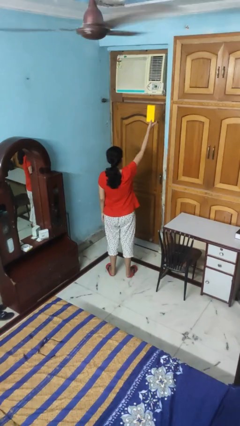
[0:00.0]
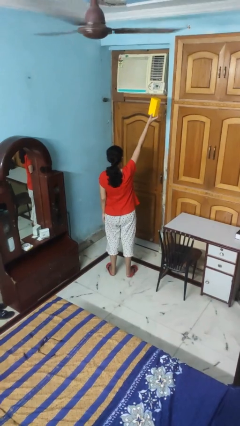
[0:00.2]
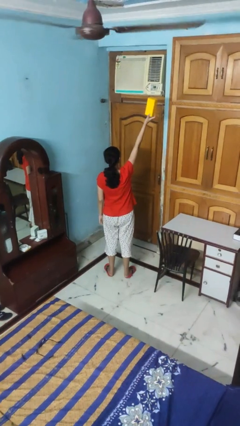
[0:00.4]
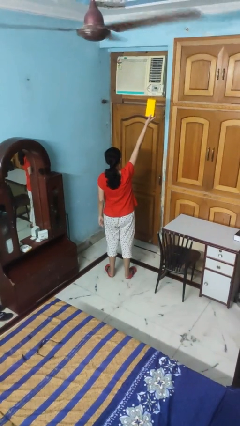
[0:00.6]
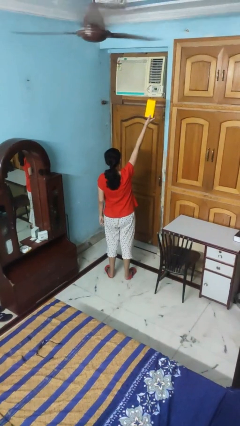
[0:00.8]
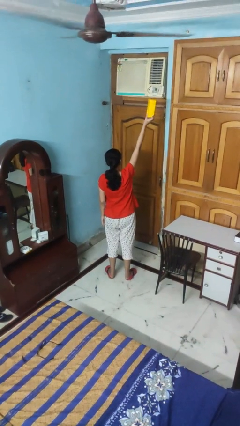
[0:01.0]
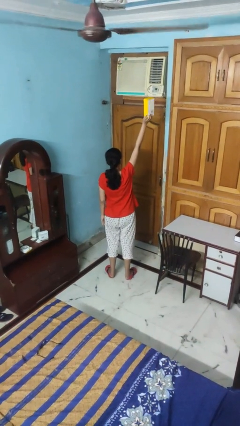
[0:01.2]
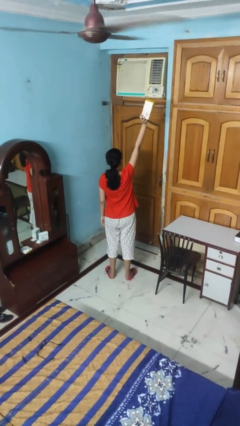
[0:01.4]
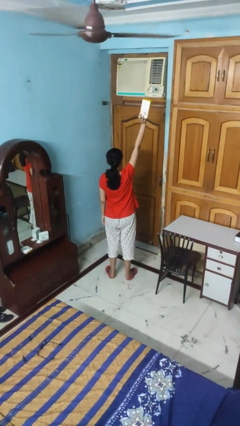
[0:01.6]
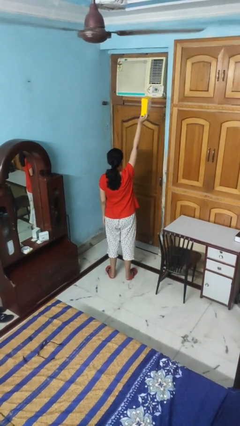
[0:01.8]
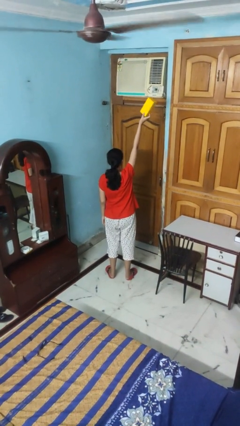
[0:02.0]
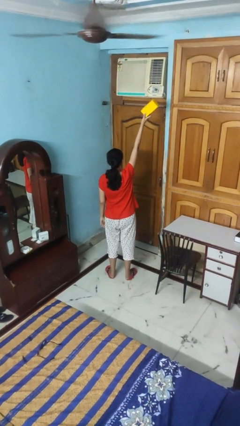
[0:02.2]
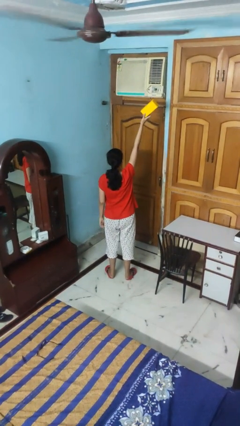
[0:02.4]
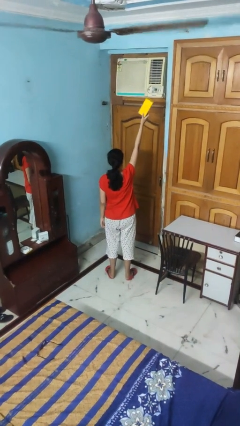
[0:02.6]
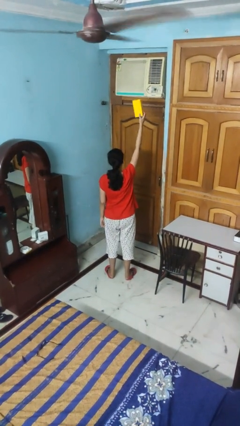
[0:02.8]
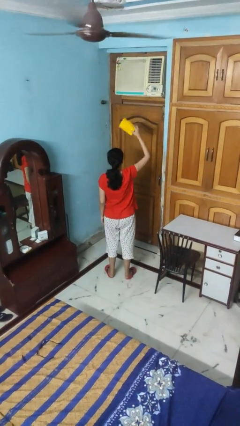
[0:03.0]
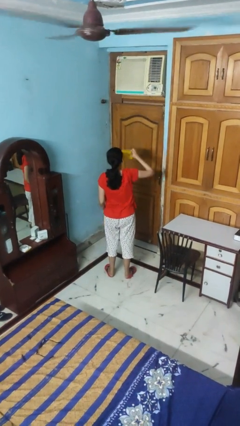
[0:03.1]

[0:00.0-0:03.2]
person holds object above head

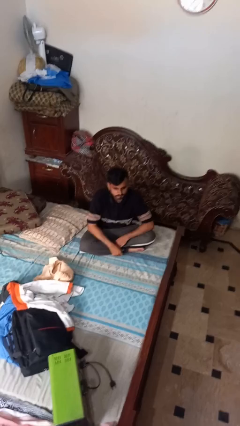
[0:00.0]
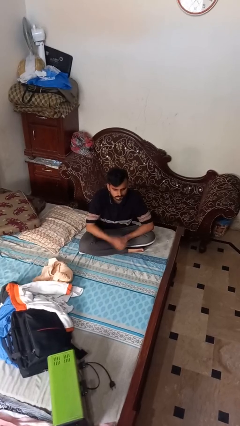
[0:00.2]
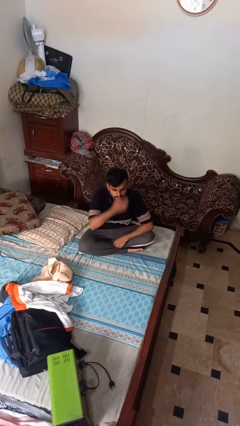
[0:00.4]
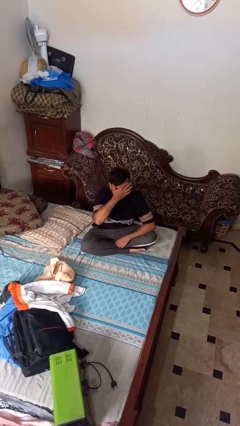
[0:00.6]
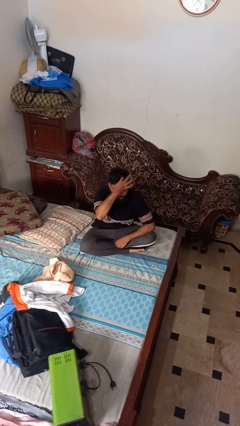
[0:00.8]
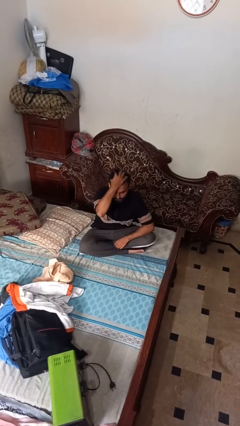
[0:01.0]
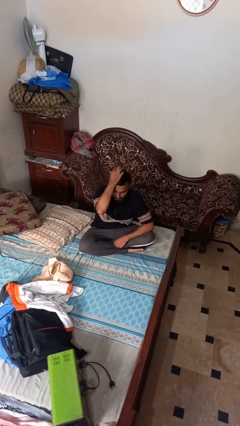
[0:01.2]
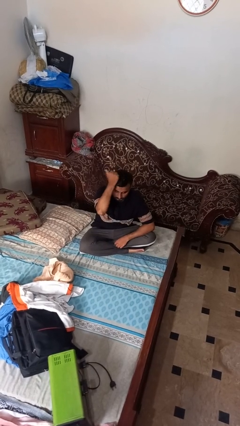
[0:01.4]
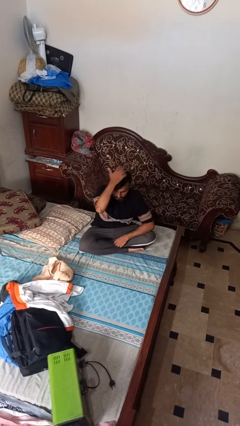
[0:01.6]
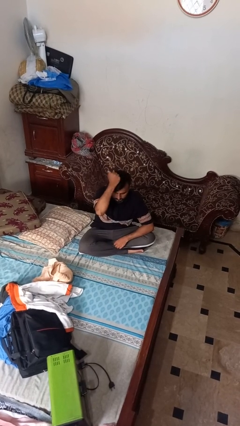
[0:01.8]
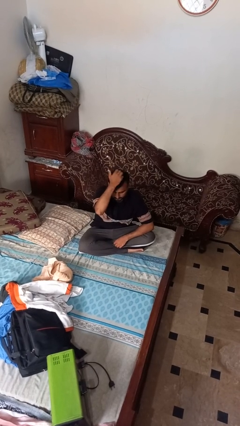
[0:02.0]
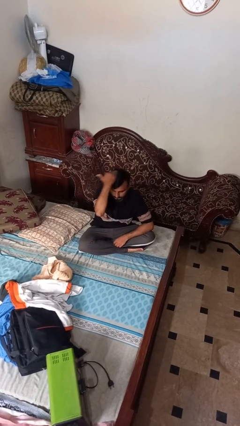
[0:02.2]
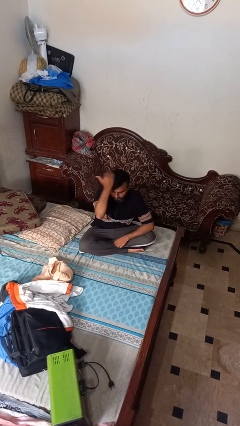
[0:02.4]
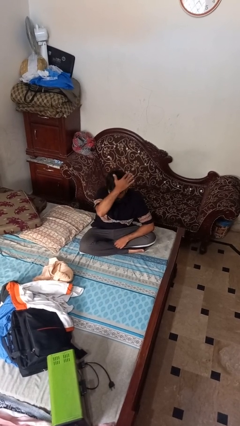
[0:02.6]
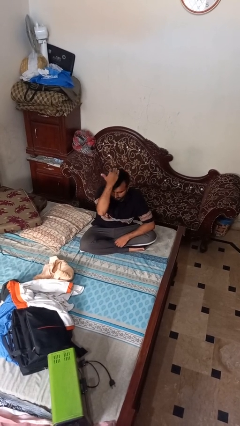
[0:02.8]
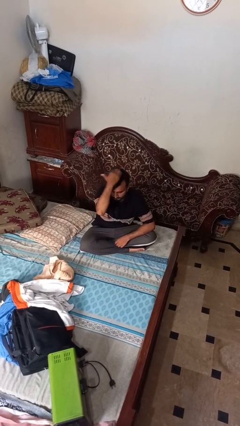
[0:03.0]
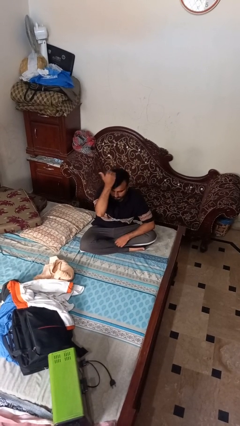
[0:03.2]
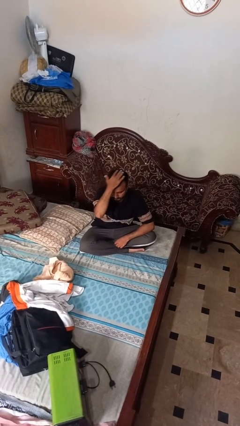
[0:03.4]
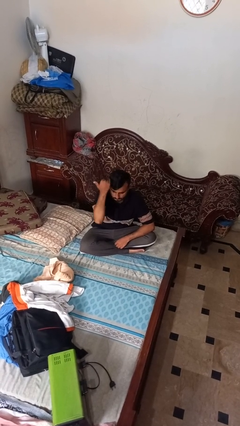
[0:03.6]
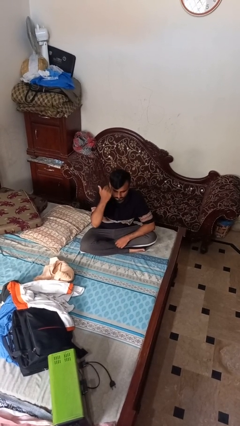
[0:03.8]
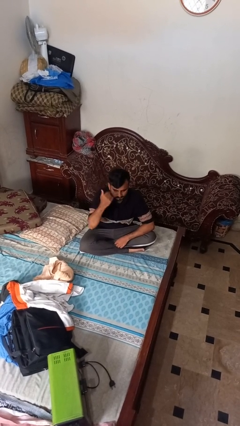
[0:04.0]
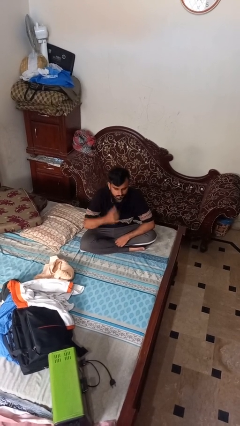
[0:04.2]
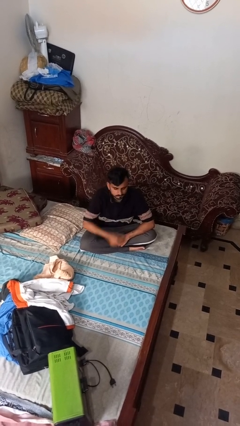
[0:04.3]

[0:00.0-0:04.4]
person strokes hair

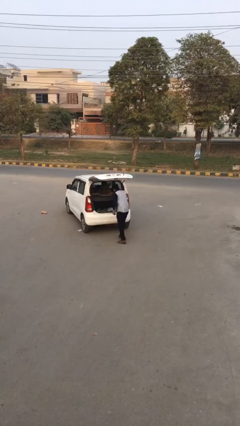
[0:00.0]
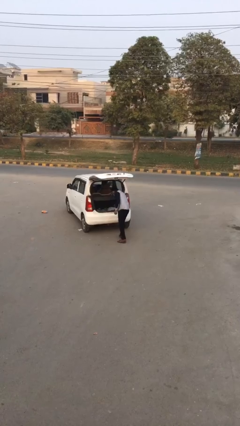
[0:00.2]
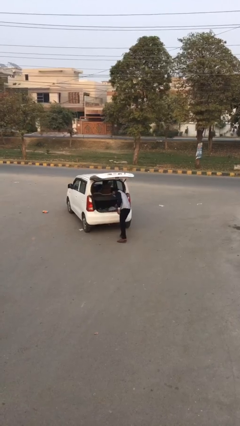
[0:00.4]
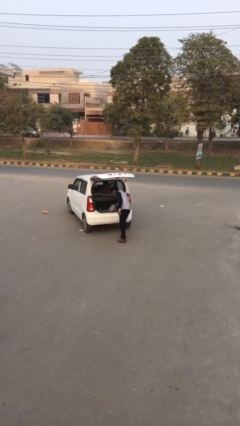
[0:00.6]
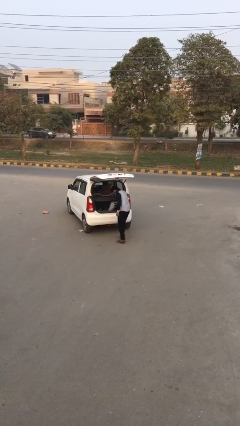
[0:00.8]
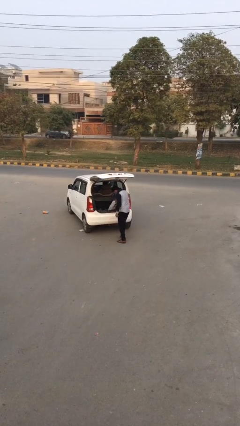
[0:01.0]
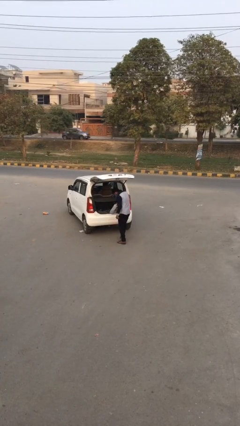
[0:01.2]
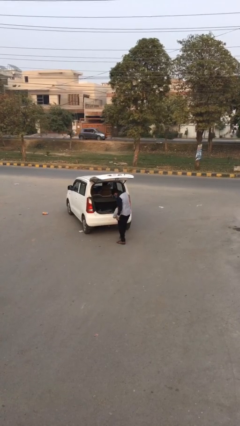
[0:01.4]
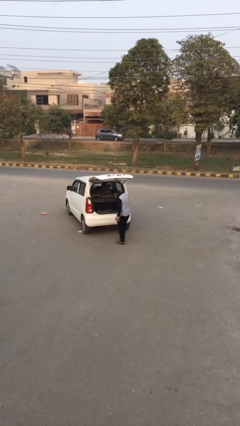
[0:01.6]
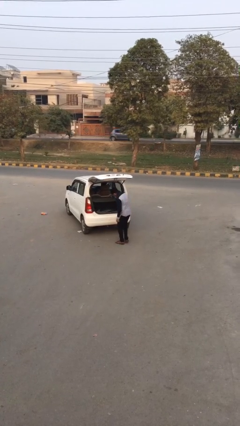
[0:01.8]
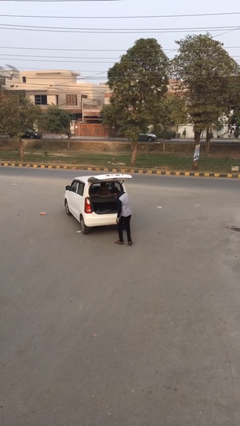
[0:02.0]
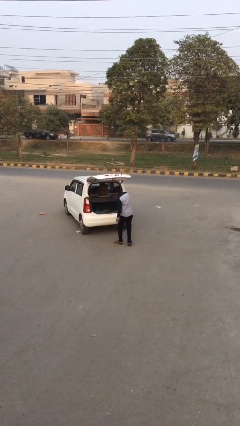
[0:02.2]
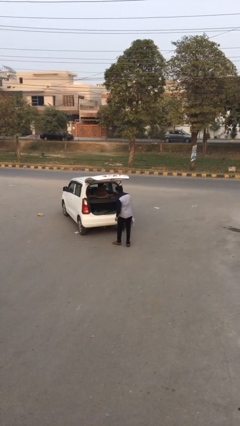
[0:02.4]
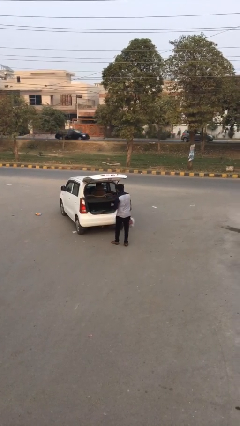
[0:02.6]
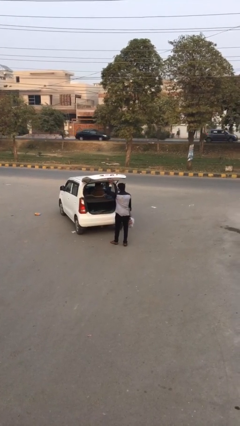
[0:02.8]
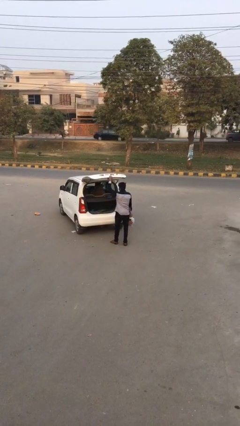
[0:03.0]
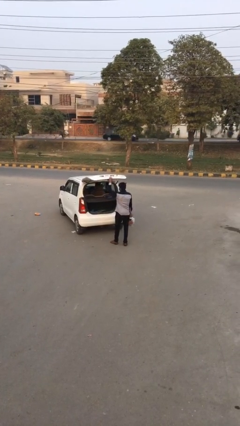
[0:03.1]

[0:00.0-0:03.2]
person unloads car

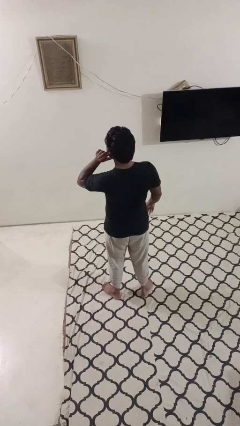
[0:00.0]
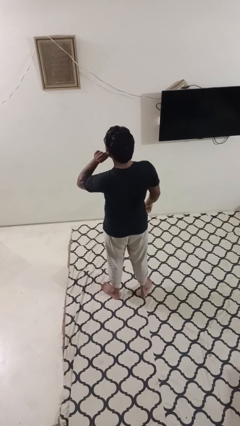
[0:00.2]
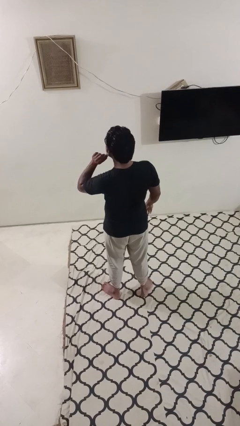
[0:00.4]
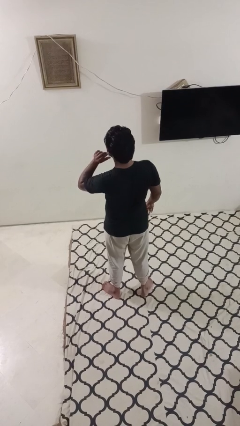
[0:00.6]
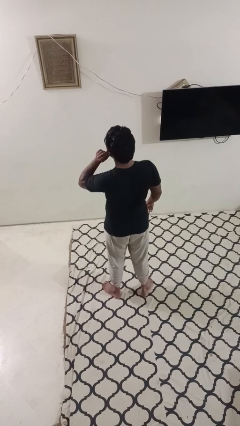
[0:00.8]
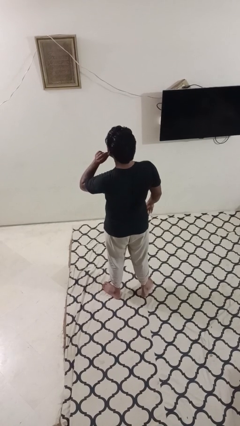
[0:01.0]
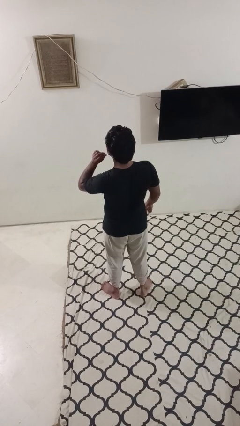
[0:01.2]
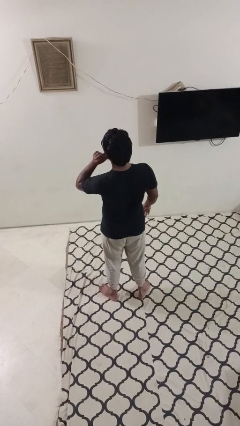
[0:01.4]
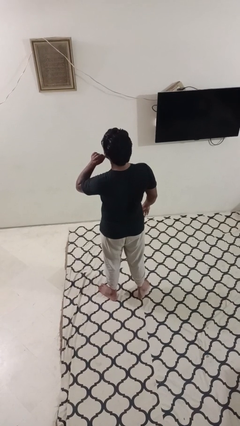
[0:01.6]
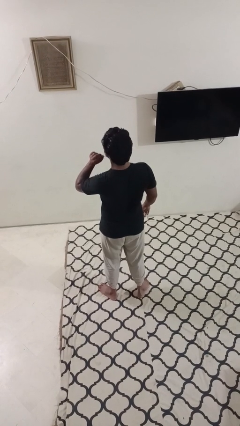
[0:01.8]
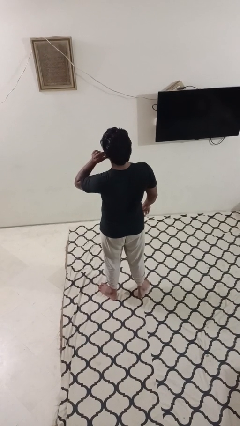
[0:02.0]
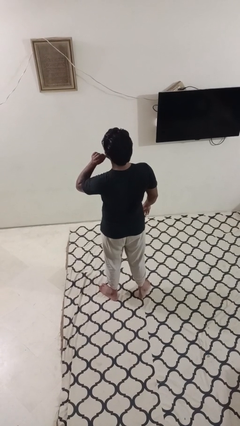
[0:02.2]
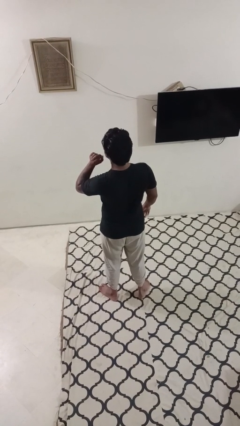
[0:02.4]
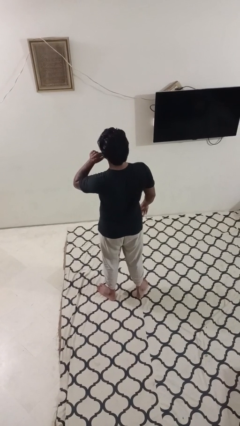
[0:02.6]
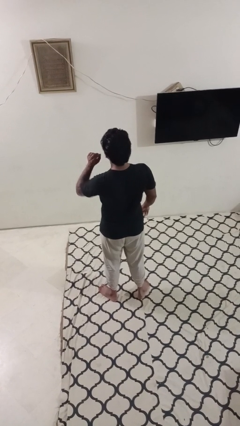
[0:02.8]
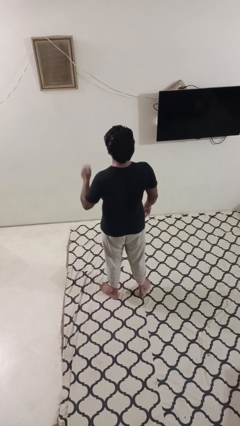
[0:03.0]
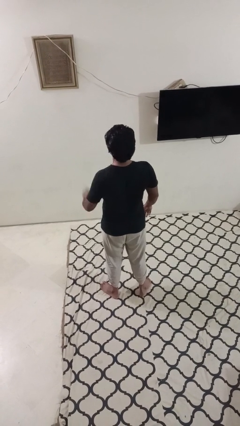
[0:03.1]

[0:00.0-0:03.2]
person touches earlobe

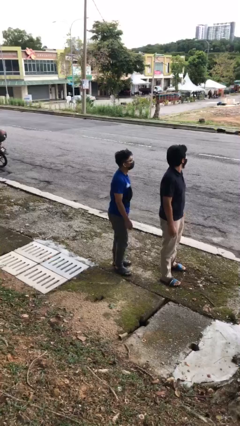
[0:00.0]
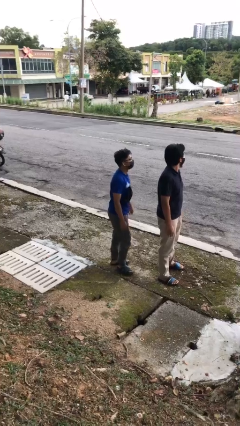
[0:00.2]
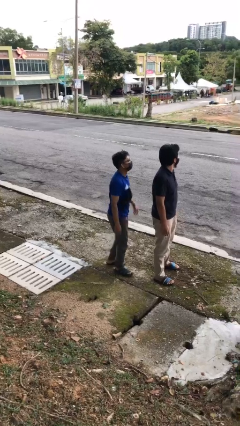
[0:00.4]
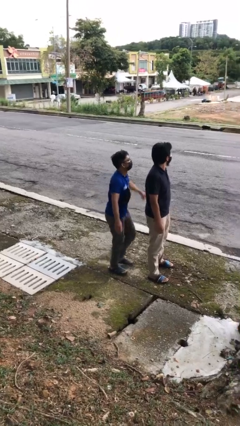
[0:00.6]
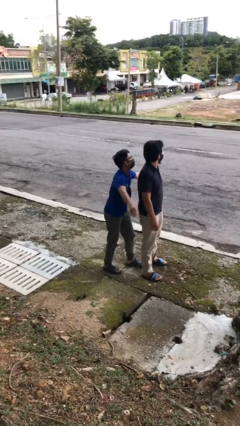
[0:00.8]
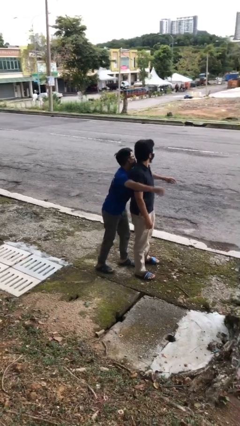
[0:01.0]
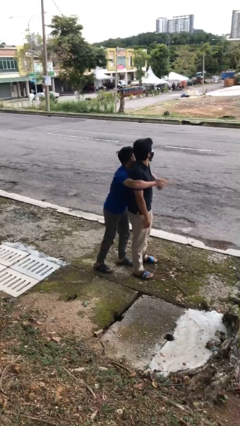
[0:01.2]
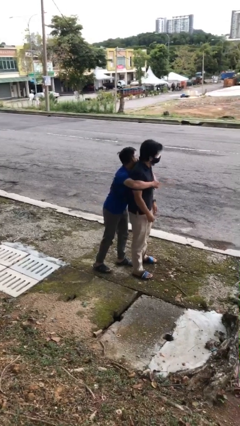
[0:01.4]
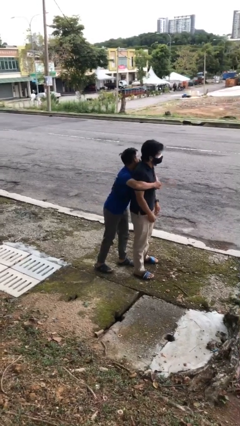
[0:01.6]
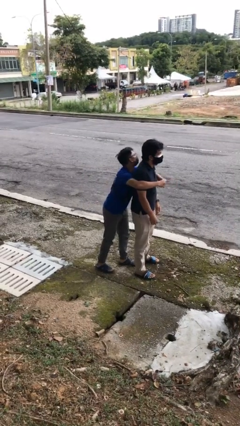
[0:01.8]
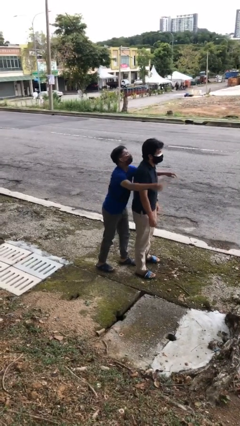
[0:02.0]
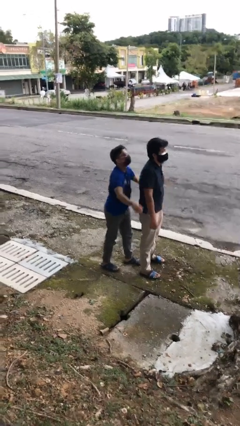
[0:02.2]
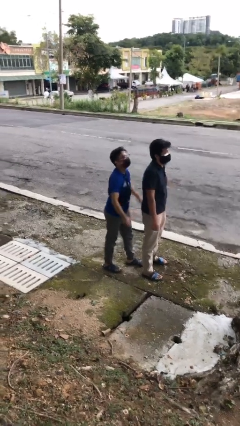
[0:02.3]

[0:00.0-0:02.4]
person hugs person from behind

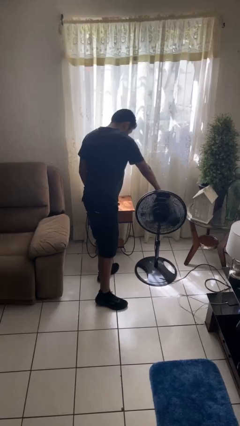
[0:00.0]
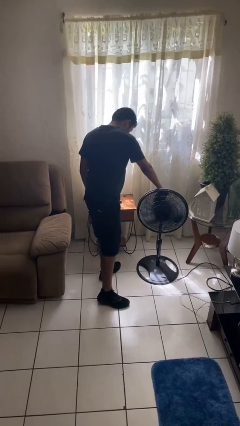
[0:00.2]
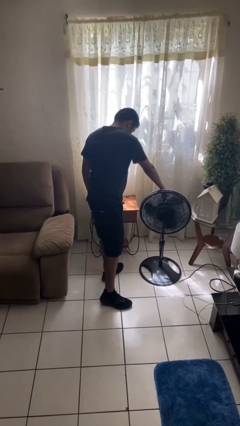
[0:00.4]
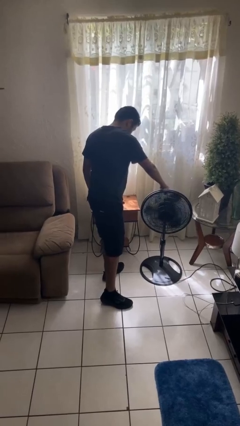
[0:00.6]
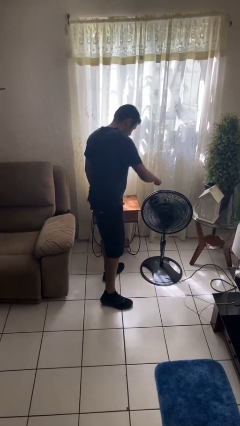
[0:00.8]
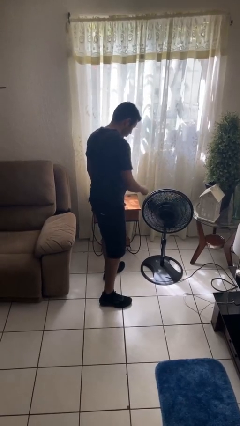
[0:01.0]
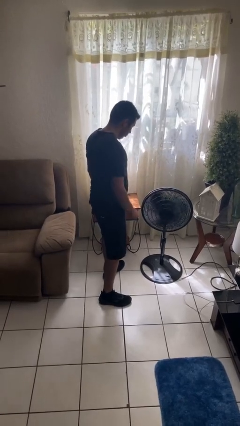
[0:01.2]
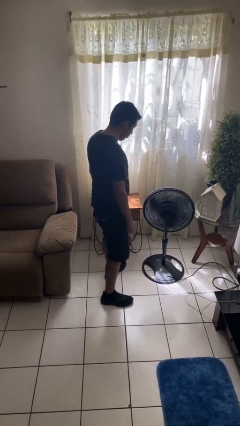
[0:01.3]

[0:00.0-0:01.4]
person turns on fan
